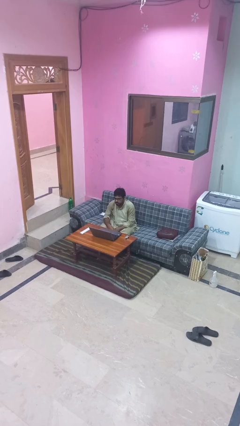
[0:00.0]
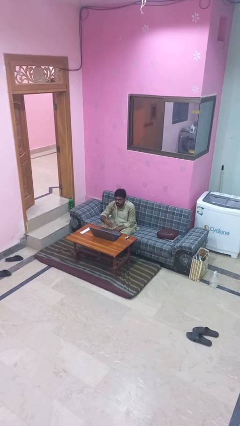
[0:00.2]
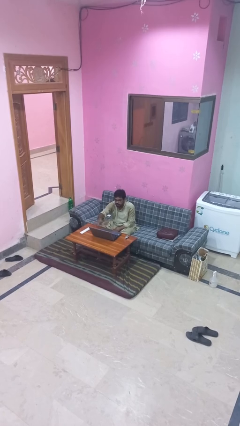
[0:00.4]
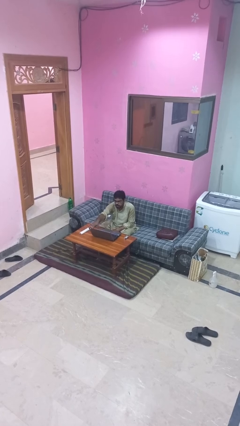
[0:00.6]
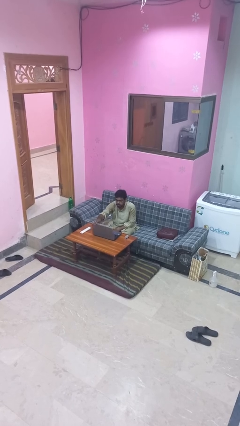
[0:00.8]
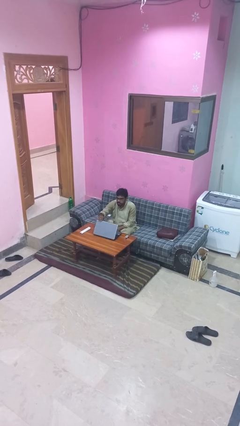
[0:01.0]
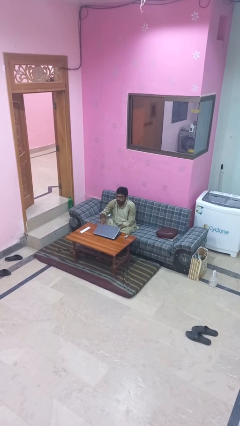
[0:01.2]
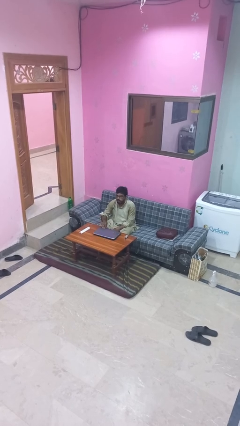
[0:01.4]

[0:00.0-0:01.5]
person closes laptop

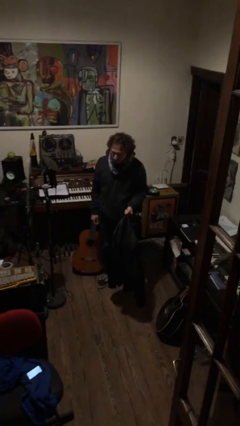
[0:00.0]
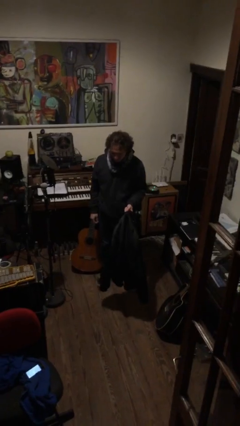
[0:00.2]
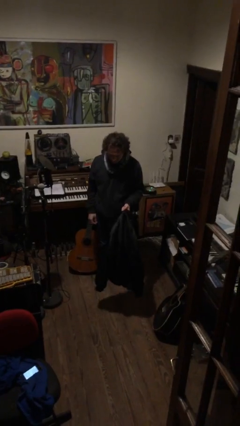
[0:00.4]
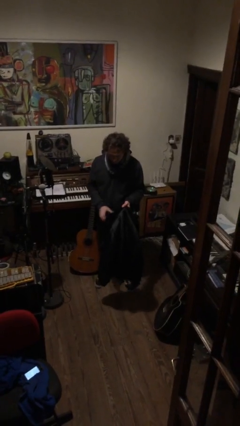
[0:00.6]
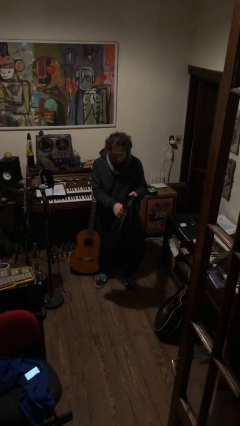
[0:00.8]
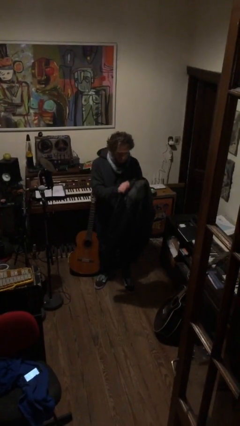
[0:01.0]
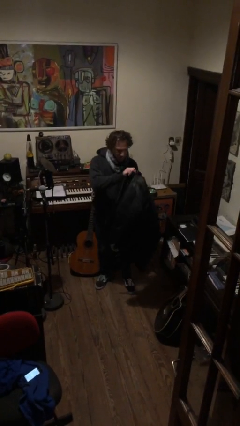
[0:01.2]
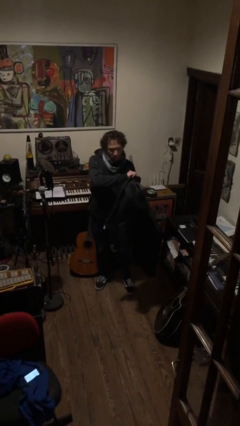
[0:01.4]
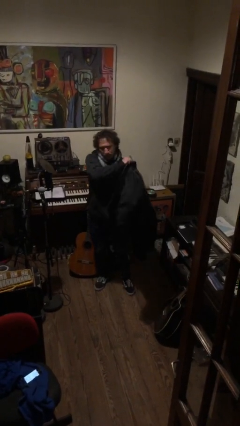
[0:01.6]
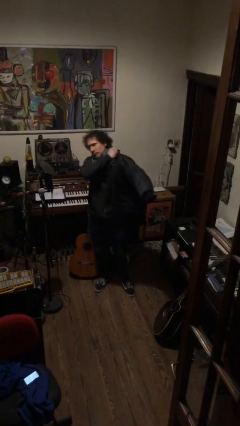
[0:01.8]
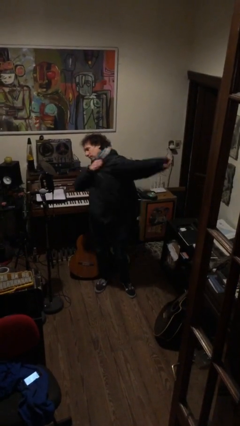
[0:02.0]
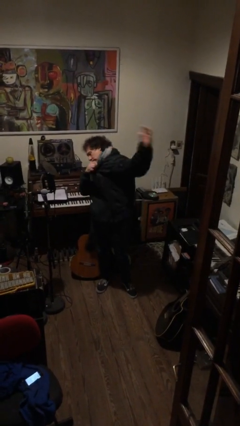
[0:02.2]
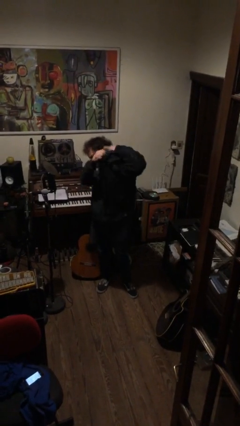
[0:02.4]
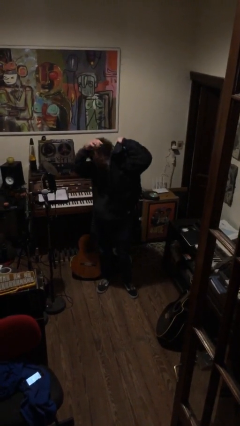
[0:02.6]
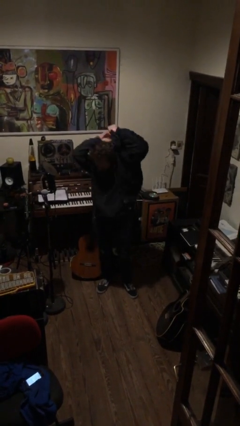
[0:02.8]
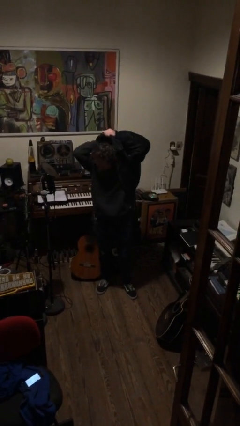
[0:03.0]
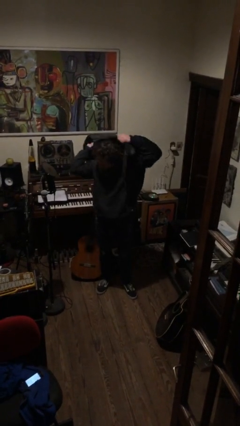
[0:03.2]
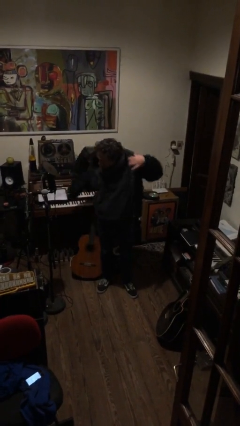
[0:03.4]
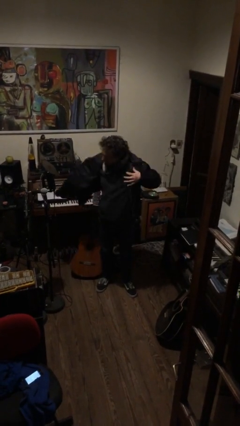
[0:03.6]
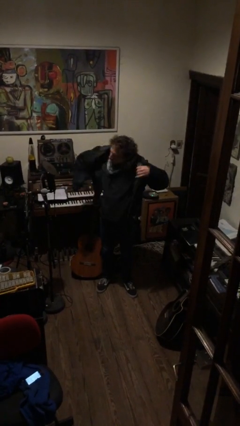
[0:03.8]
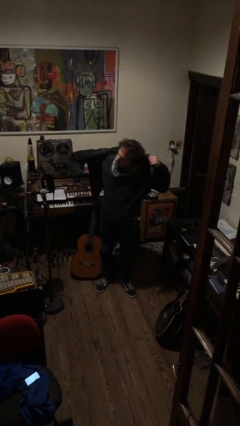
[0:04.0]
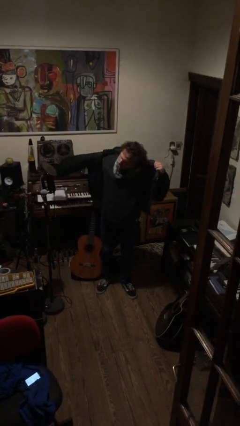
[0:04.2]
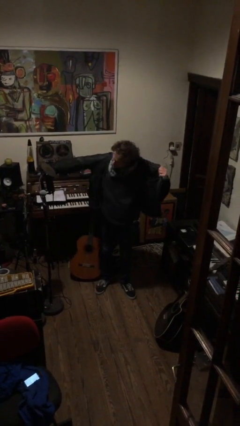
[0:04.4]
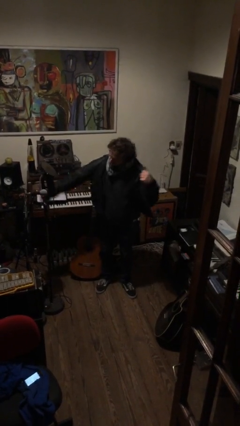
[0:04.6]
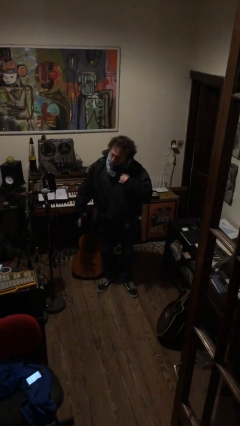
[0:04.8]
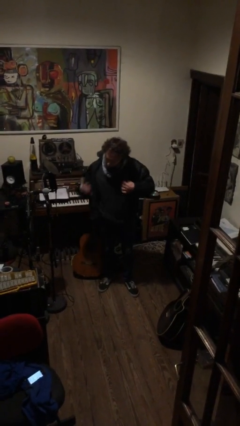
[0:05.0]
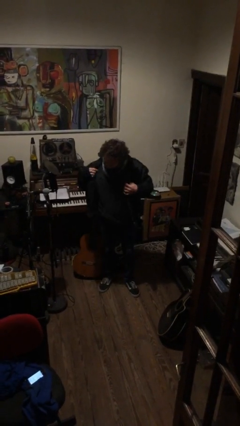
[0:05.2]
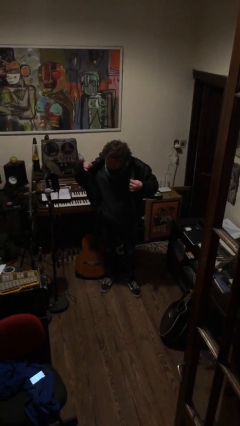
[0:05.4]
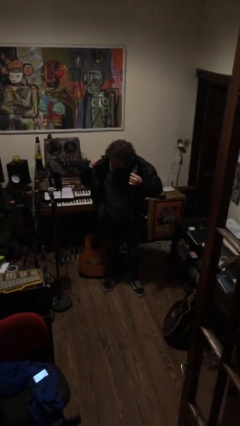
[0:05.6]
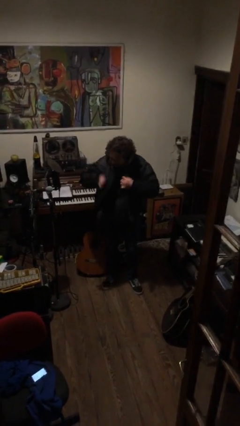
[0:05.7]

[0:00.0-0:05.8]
person puts on jacket

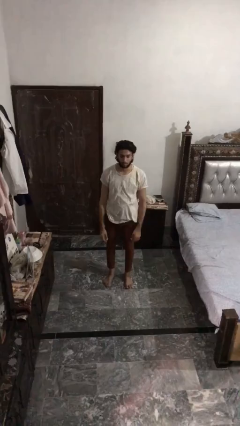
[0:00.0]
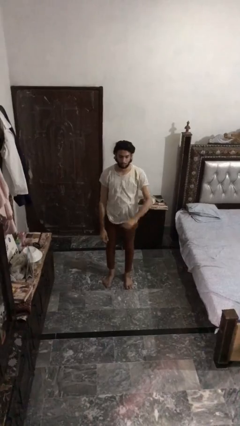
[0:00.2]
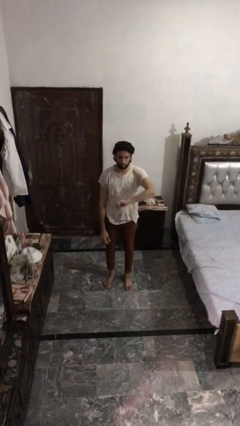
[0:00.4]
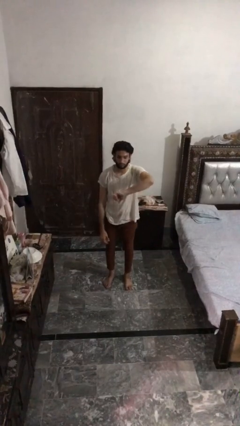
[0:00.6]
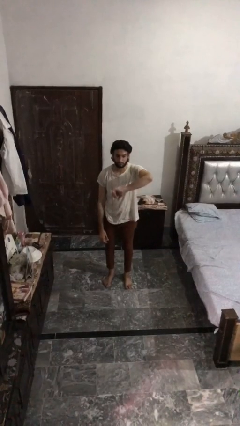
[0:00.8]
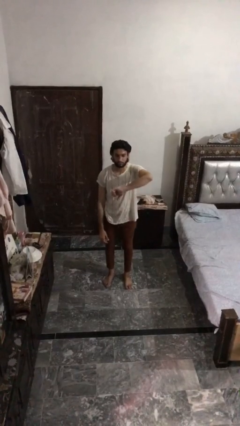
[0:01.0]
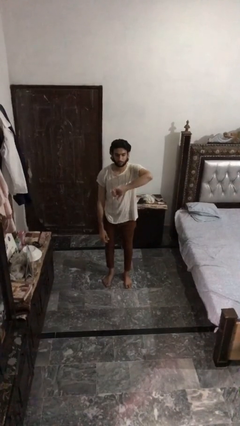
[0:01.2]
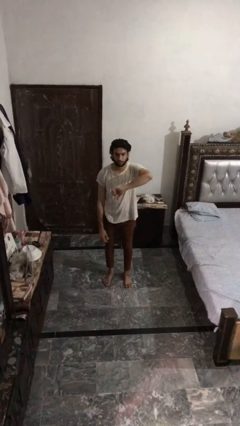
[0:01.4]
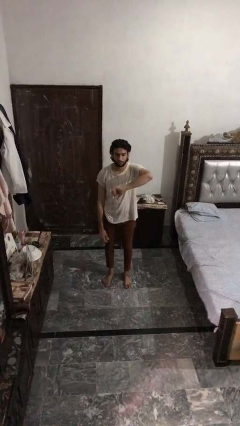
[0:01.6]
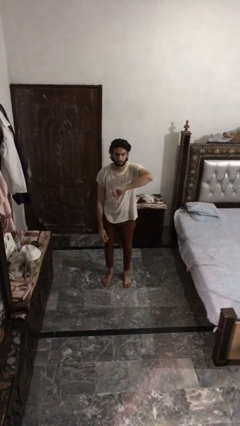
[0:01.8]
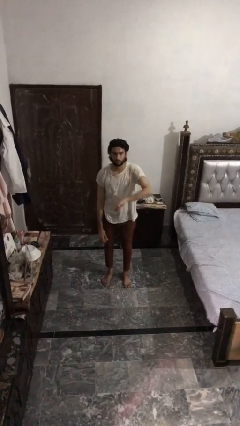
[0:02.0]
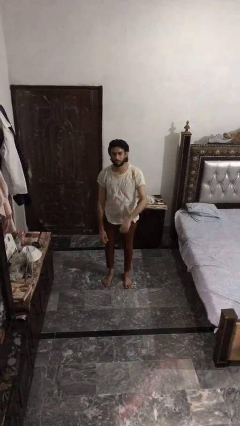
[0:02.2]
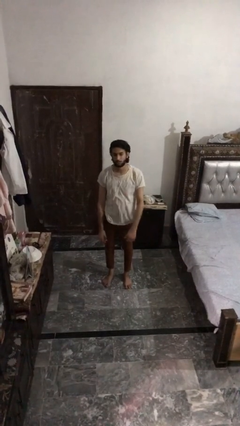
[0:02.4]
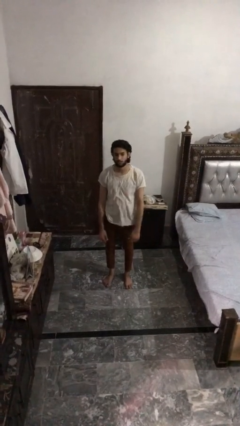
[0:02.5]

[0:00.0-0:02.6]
person gestures thumbs down

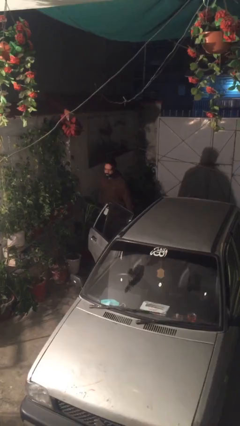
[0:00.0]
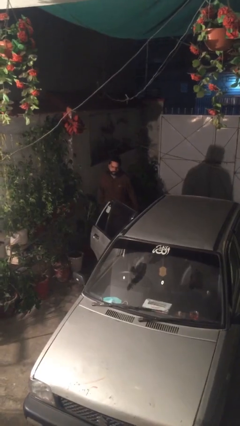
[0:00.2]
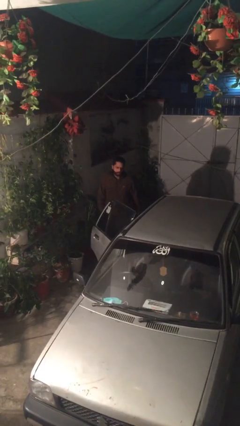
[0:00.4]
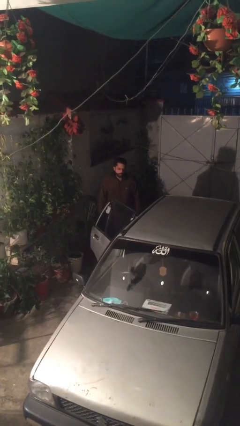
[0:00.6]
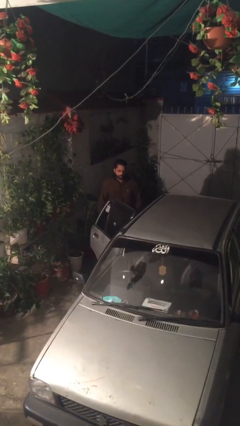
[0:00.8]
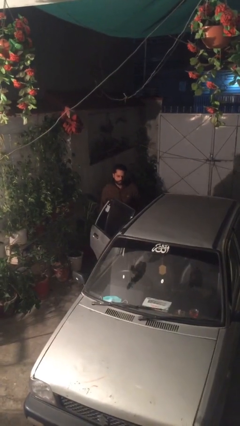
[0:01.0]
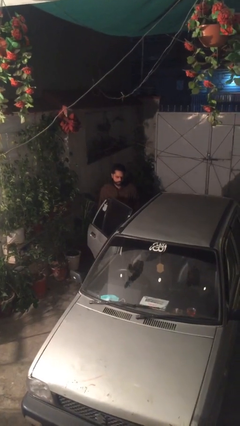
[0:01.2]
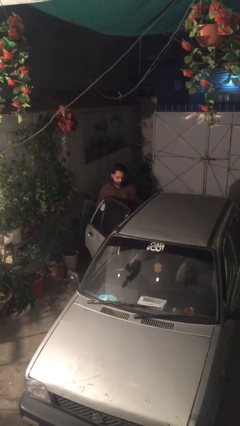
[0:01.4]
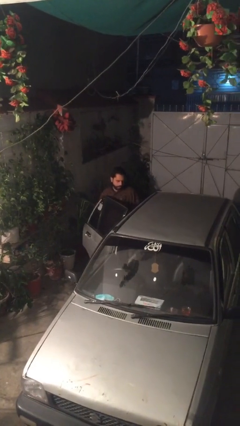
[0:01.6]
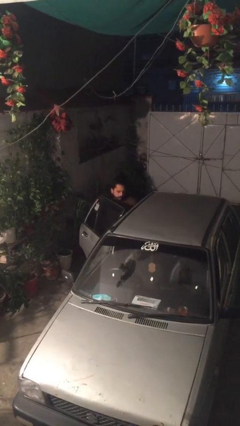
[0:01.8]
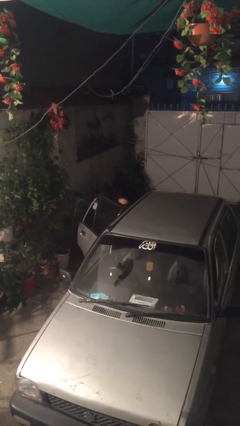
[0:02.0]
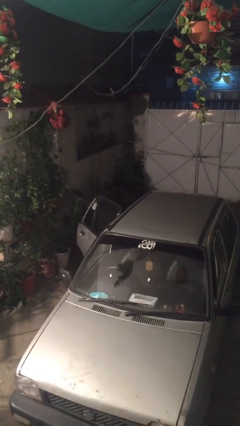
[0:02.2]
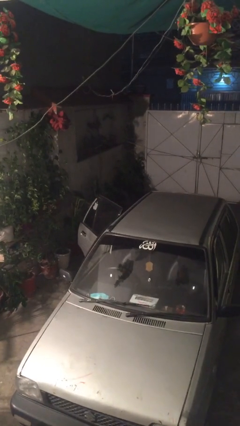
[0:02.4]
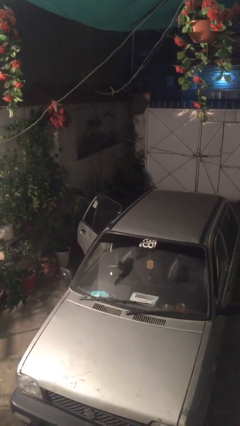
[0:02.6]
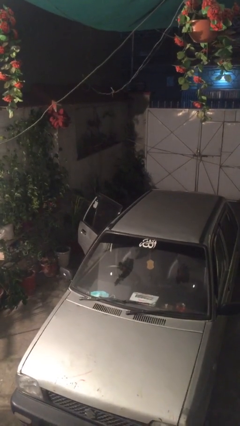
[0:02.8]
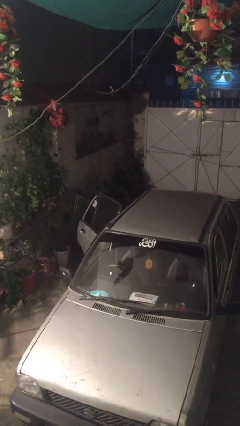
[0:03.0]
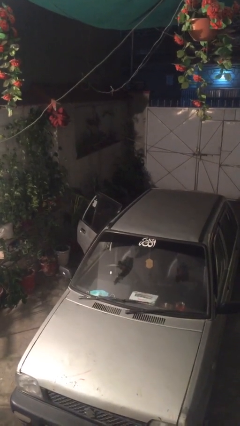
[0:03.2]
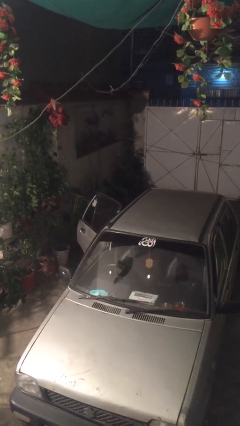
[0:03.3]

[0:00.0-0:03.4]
person enters car

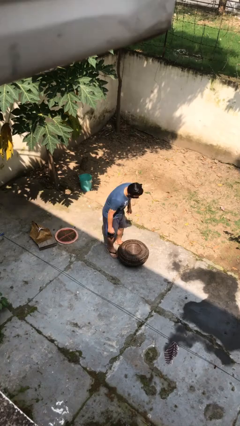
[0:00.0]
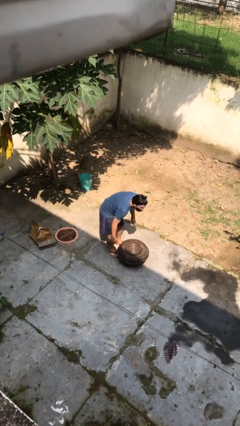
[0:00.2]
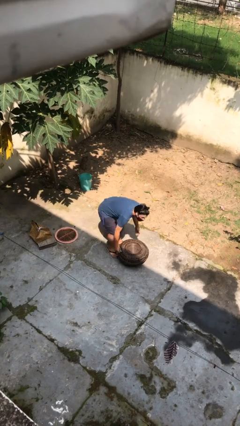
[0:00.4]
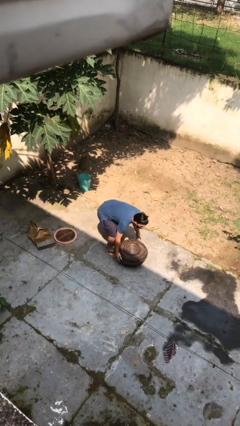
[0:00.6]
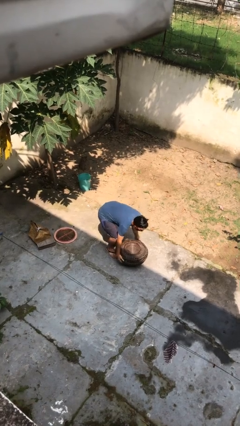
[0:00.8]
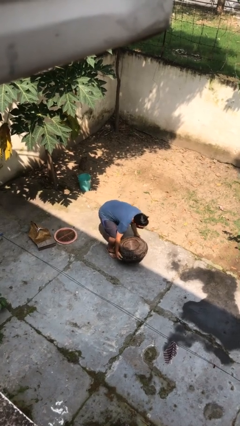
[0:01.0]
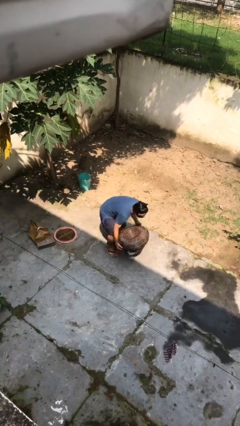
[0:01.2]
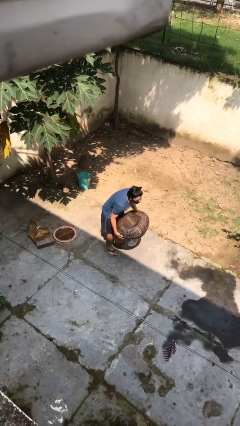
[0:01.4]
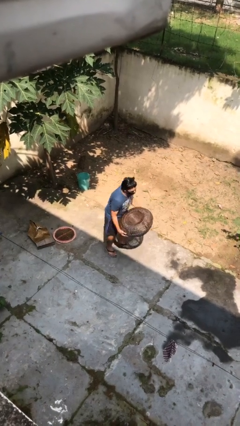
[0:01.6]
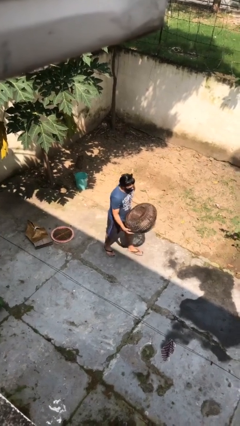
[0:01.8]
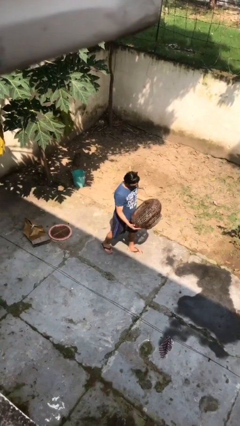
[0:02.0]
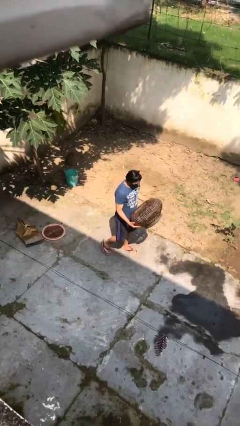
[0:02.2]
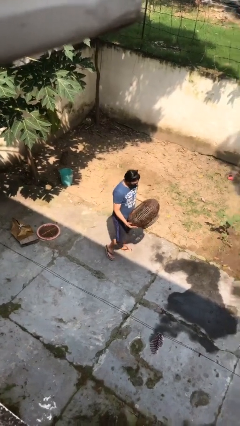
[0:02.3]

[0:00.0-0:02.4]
person picks up object from floor

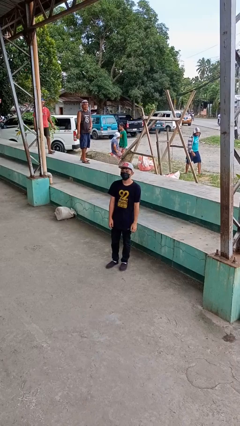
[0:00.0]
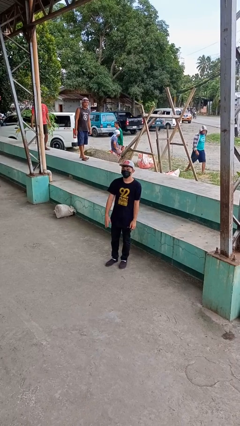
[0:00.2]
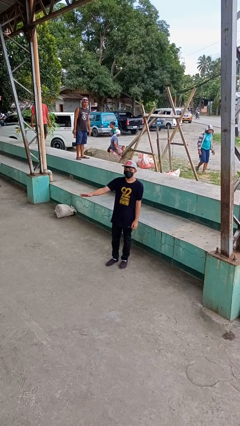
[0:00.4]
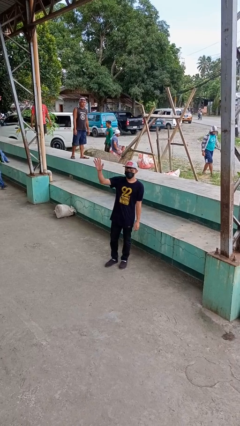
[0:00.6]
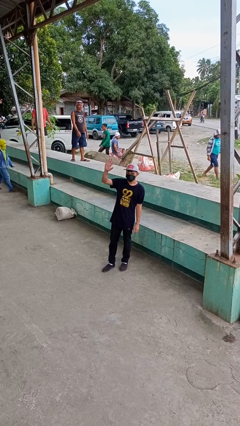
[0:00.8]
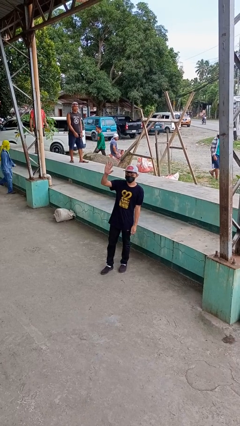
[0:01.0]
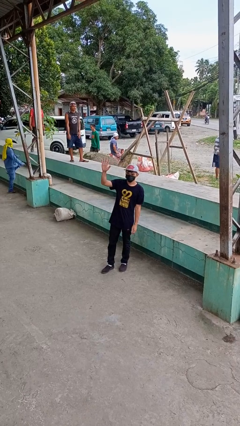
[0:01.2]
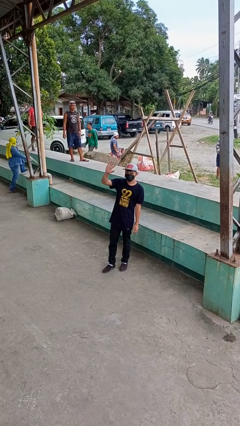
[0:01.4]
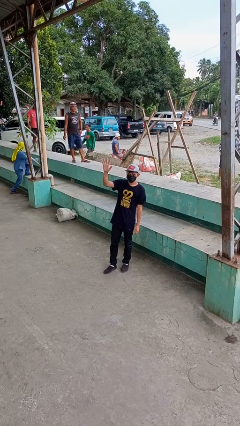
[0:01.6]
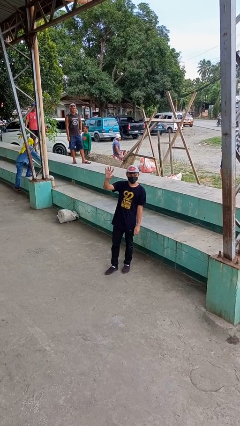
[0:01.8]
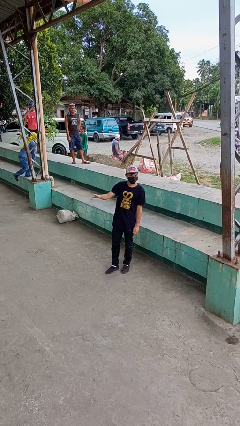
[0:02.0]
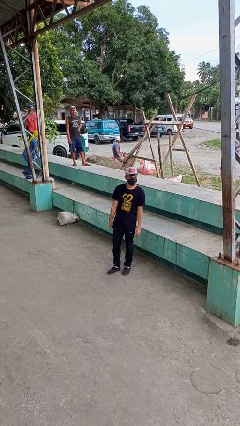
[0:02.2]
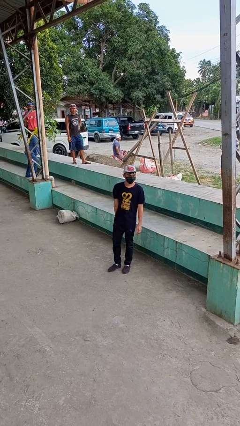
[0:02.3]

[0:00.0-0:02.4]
person waves at person
